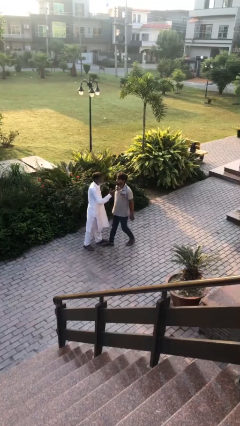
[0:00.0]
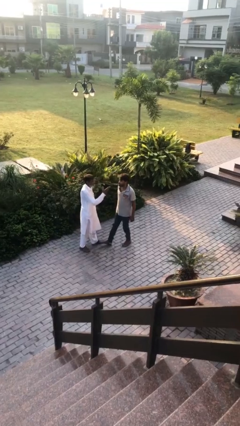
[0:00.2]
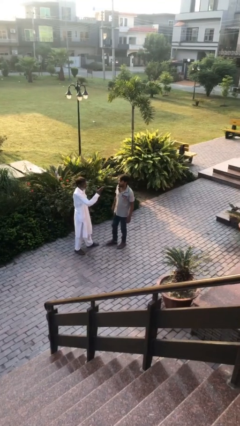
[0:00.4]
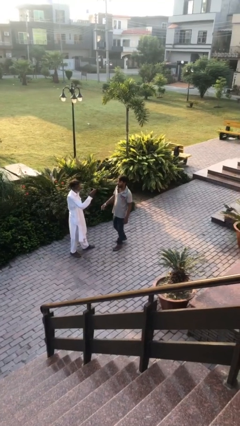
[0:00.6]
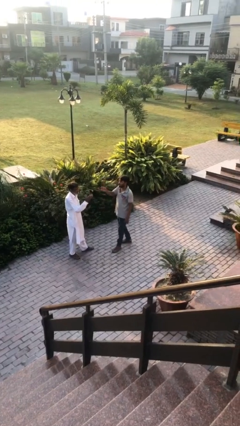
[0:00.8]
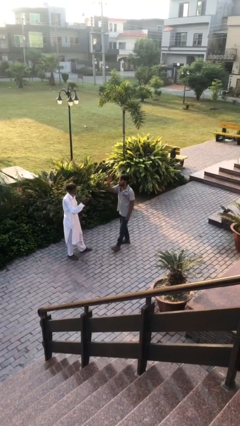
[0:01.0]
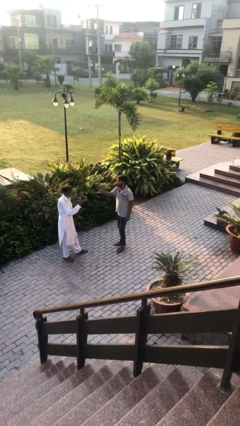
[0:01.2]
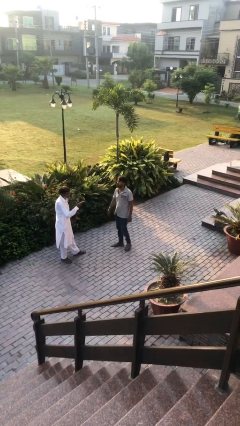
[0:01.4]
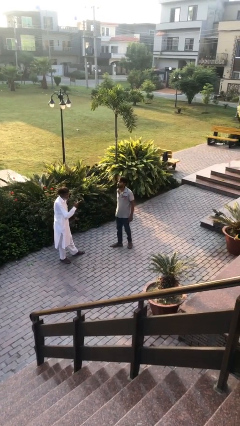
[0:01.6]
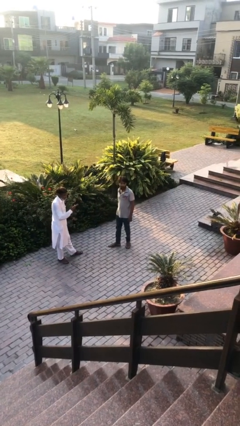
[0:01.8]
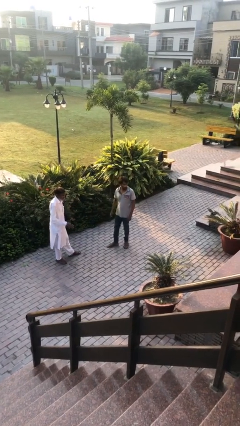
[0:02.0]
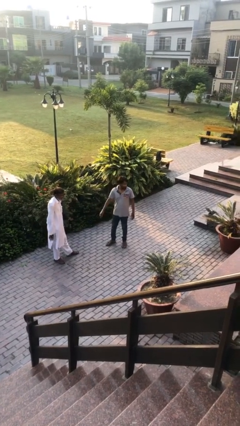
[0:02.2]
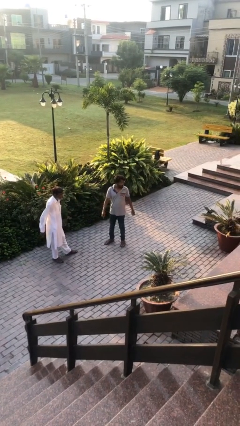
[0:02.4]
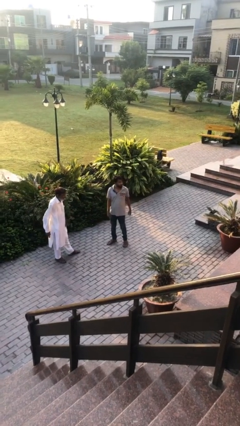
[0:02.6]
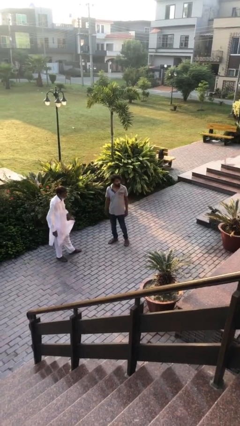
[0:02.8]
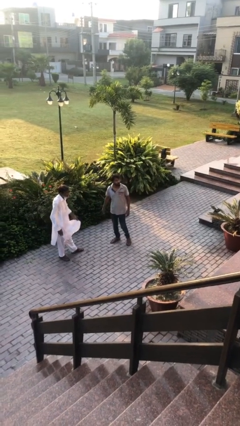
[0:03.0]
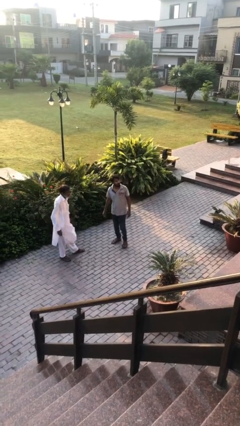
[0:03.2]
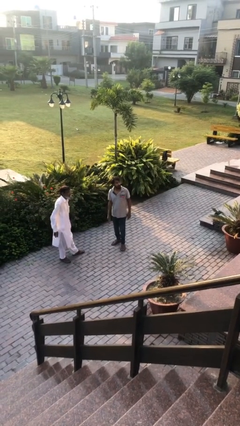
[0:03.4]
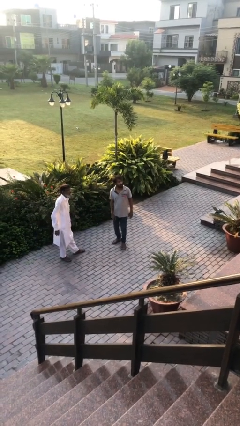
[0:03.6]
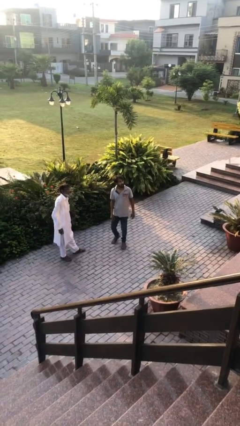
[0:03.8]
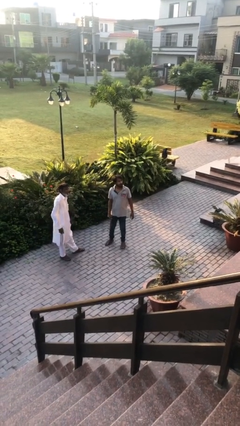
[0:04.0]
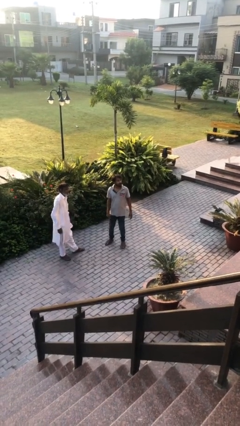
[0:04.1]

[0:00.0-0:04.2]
person talks to person

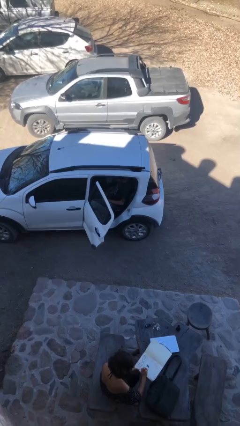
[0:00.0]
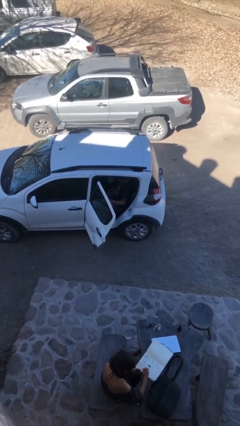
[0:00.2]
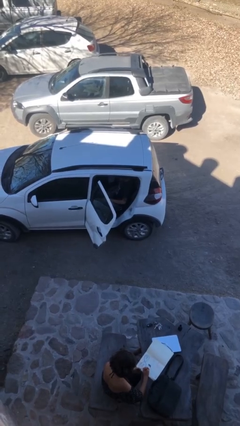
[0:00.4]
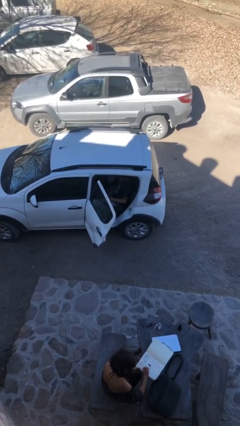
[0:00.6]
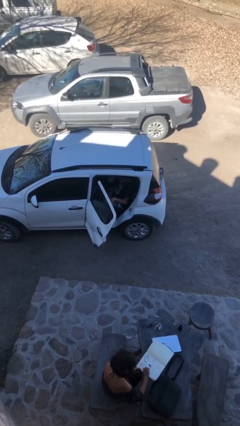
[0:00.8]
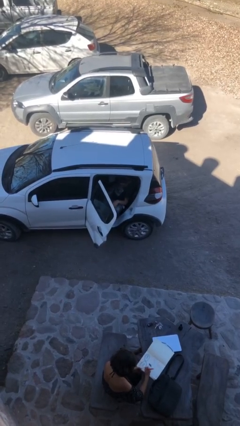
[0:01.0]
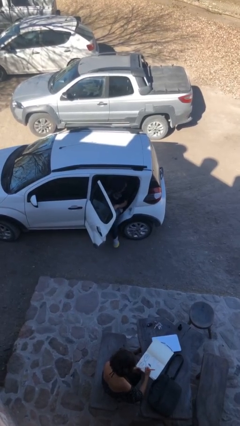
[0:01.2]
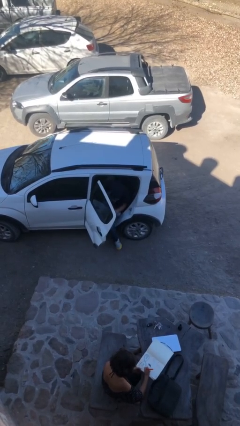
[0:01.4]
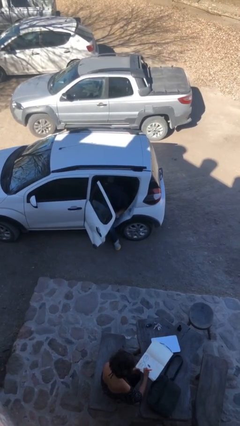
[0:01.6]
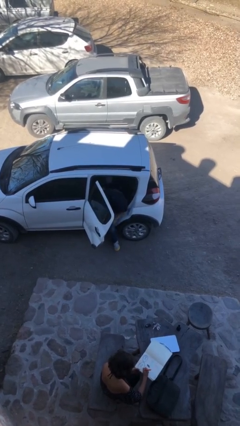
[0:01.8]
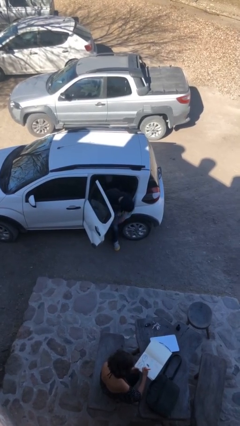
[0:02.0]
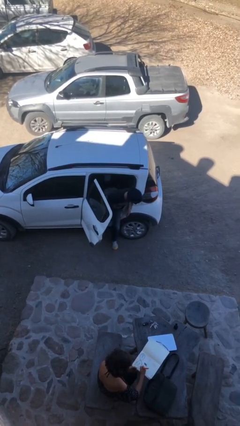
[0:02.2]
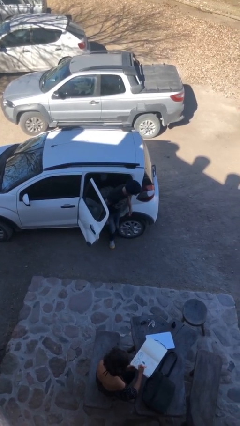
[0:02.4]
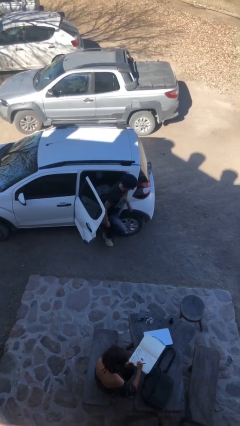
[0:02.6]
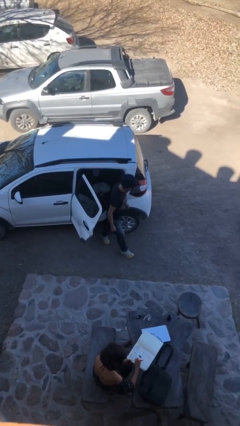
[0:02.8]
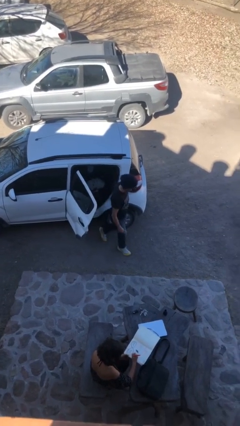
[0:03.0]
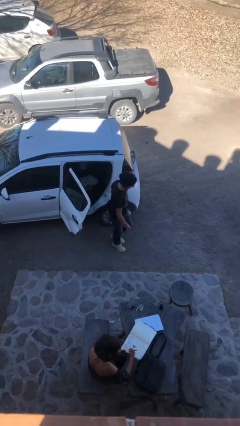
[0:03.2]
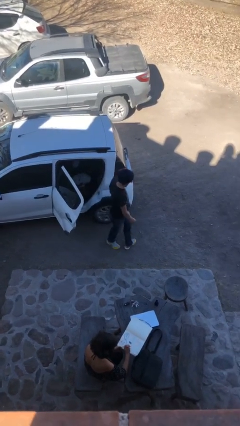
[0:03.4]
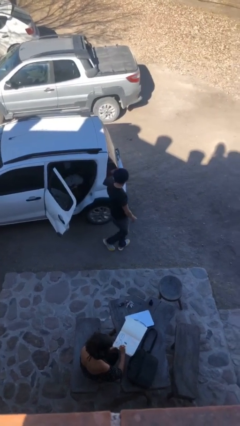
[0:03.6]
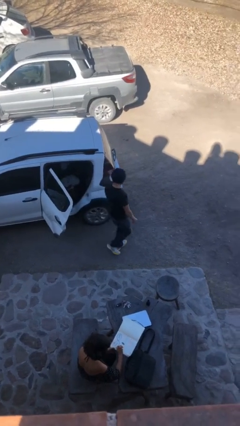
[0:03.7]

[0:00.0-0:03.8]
person exits car

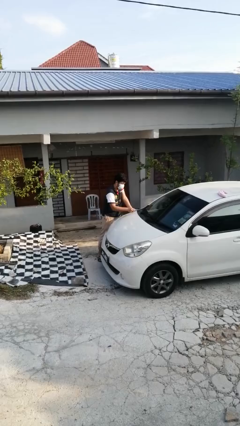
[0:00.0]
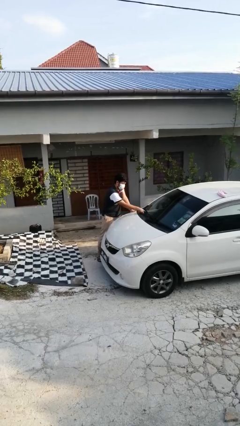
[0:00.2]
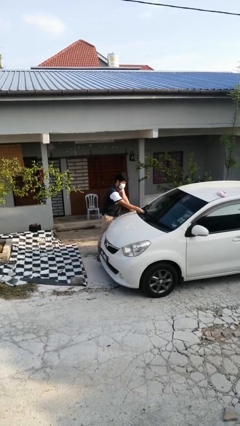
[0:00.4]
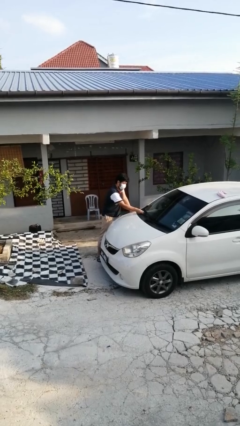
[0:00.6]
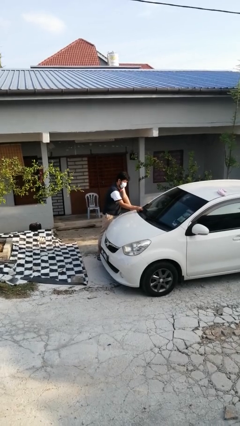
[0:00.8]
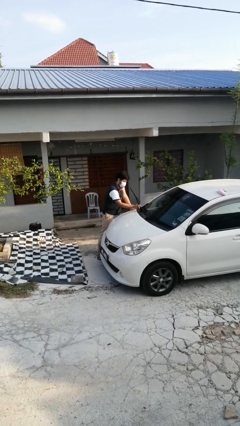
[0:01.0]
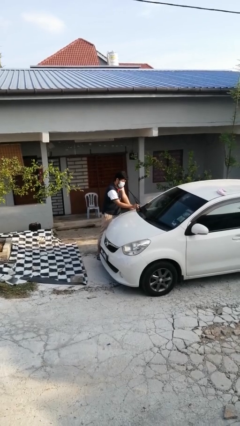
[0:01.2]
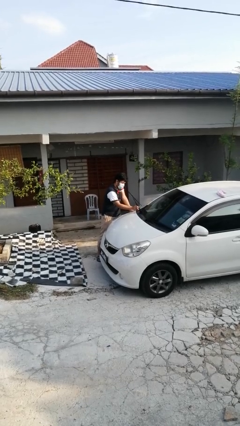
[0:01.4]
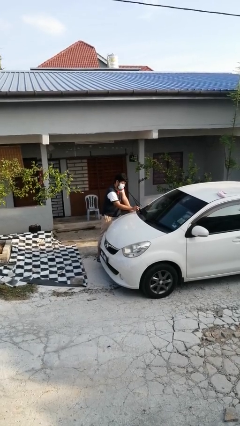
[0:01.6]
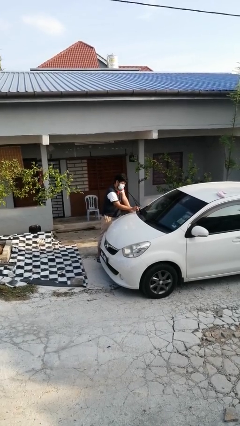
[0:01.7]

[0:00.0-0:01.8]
person flips up car wipers

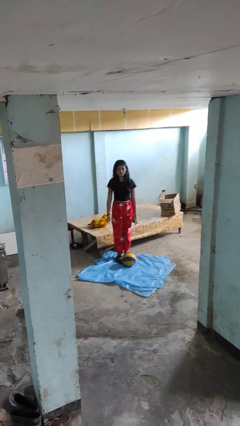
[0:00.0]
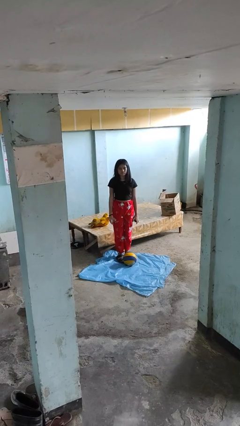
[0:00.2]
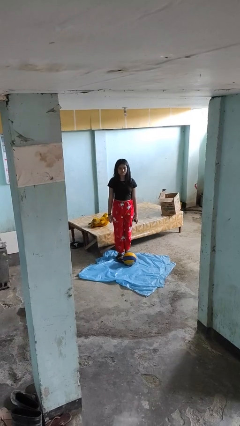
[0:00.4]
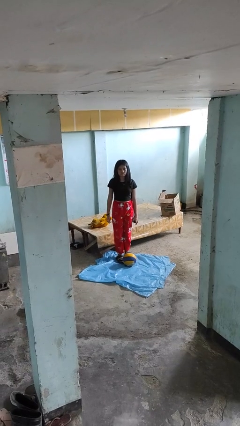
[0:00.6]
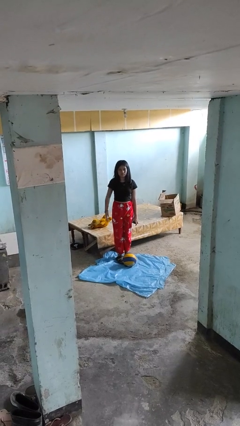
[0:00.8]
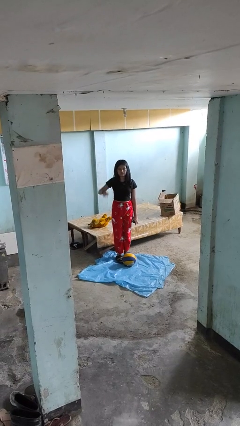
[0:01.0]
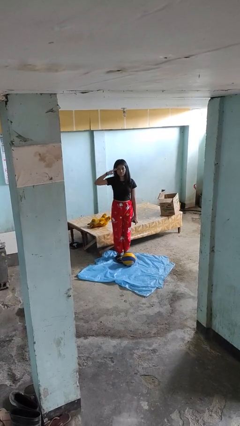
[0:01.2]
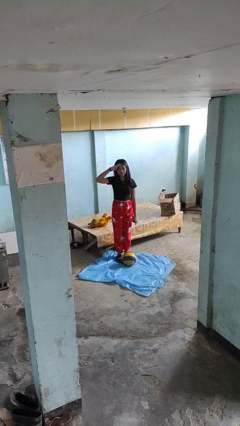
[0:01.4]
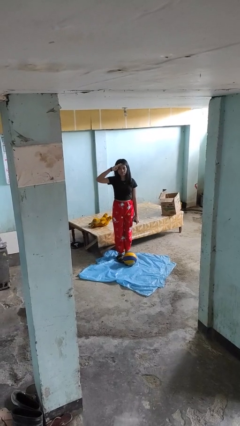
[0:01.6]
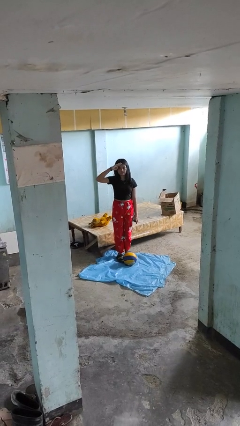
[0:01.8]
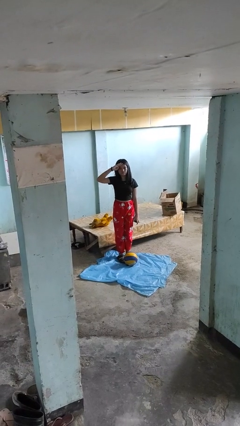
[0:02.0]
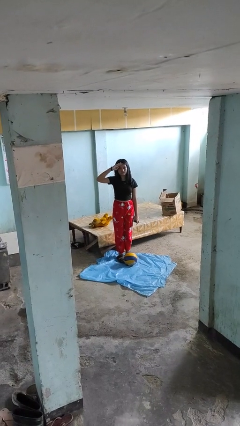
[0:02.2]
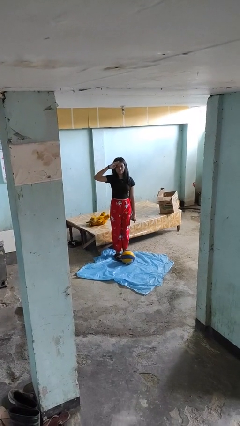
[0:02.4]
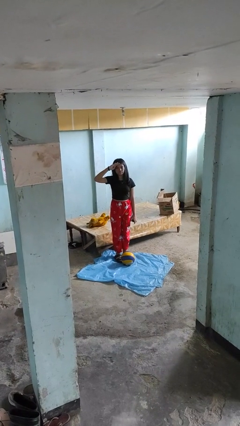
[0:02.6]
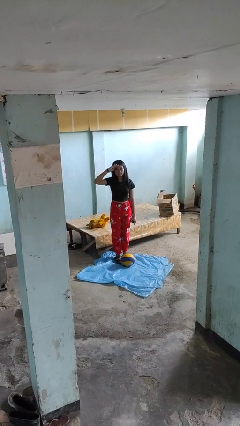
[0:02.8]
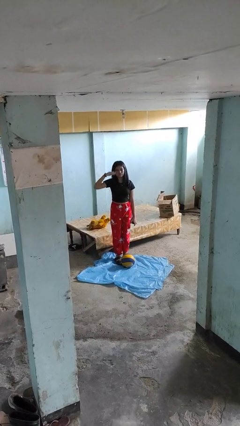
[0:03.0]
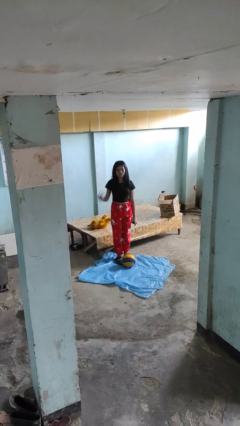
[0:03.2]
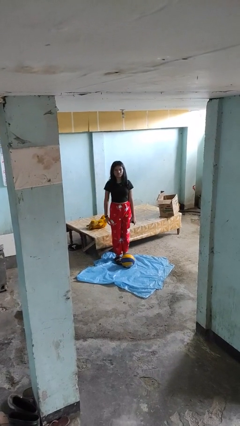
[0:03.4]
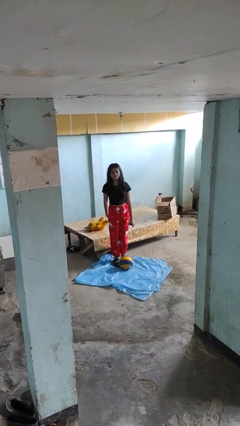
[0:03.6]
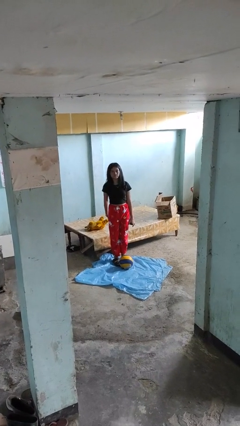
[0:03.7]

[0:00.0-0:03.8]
person salutes

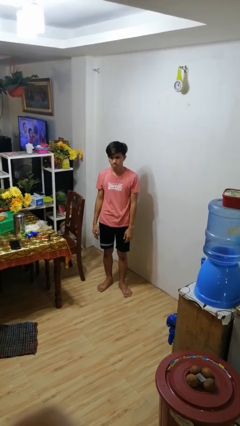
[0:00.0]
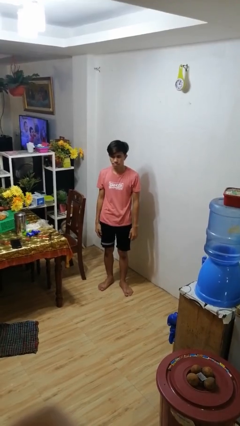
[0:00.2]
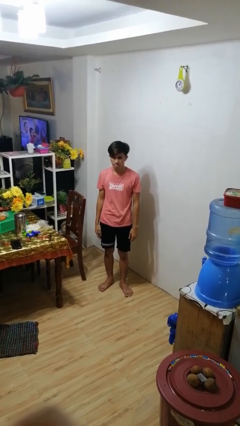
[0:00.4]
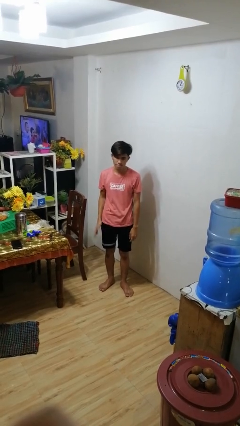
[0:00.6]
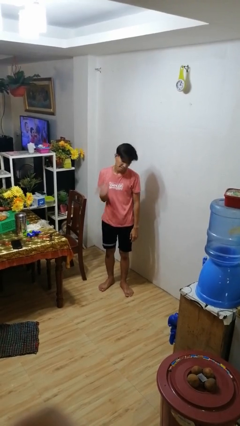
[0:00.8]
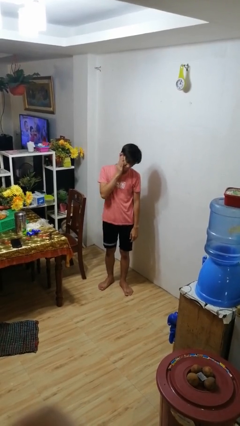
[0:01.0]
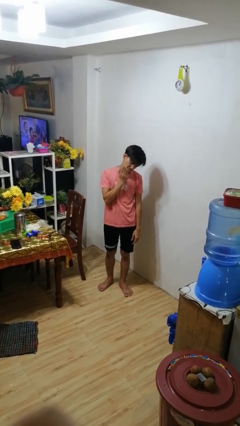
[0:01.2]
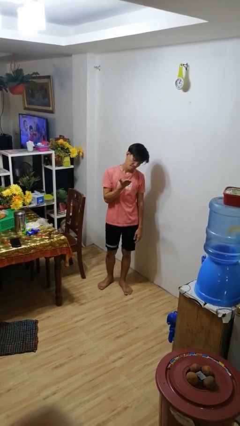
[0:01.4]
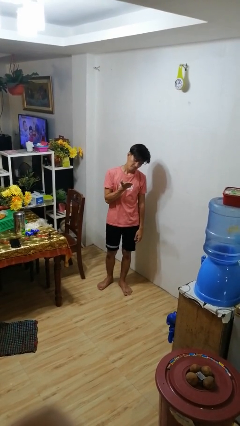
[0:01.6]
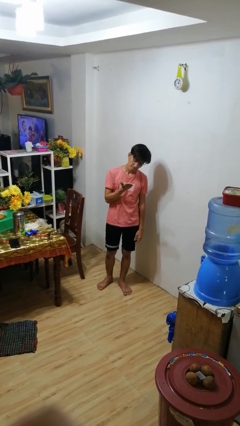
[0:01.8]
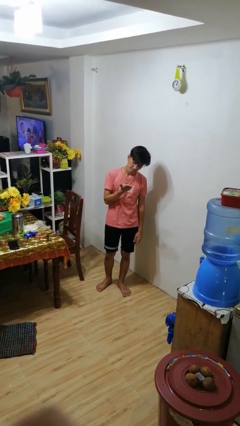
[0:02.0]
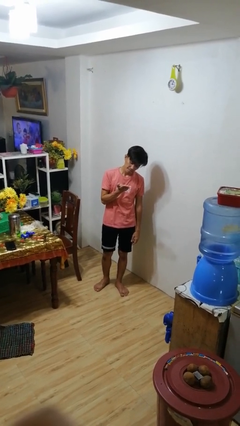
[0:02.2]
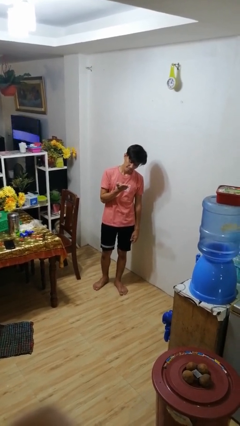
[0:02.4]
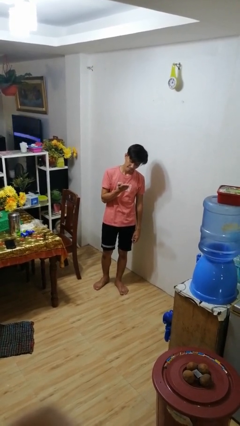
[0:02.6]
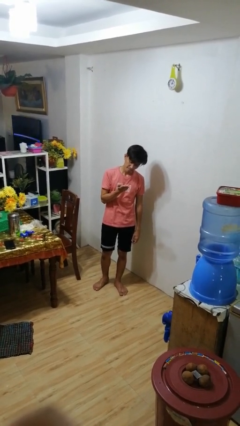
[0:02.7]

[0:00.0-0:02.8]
person swats bug

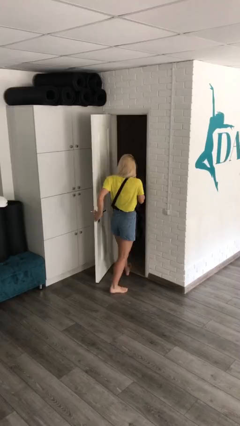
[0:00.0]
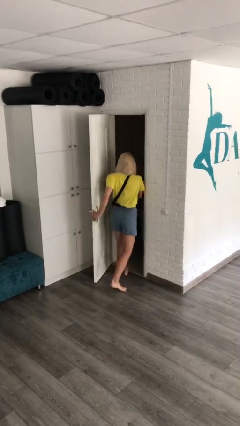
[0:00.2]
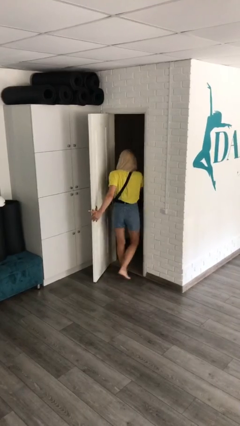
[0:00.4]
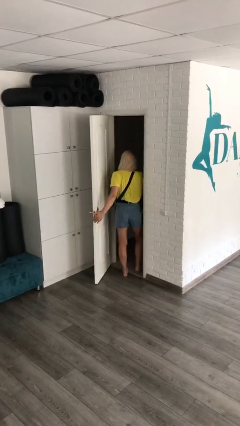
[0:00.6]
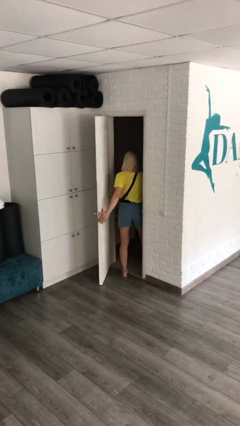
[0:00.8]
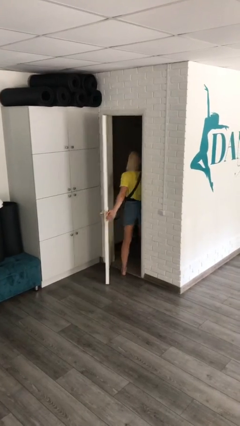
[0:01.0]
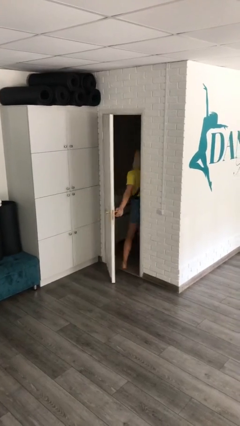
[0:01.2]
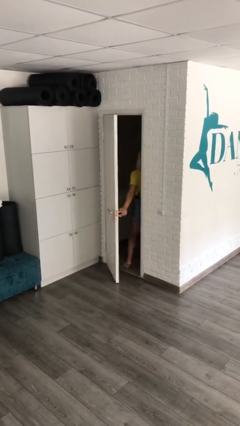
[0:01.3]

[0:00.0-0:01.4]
person exits scene through structure
